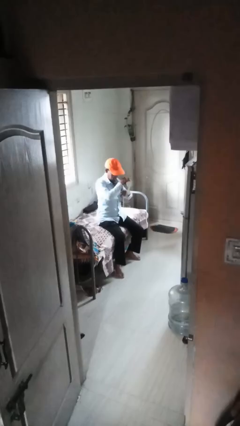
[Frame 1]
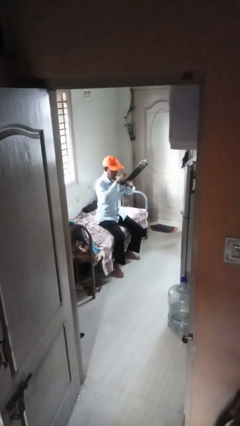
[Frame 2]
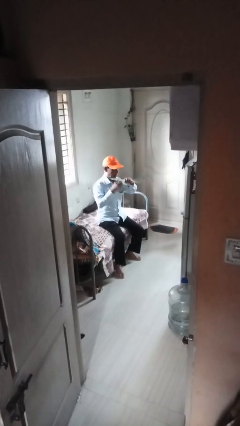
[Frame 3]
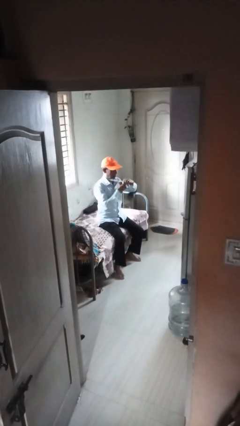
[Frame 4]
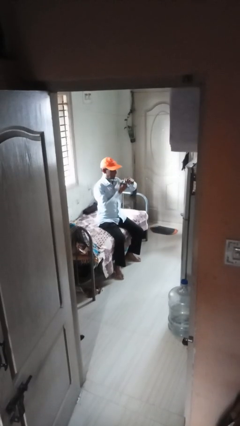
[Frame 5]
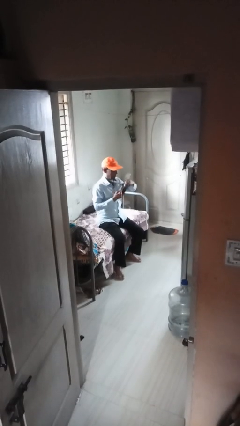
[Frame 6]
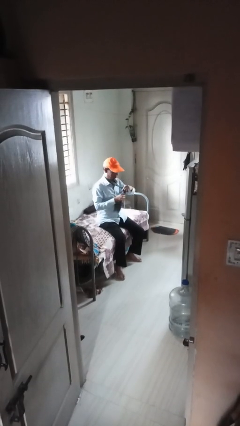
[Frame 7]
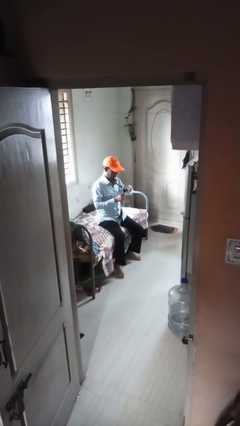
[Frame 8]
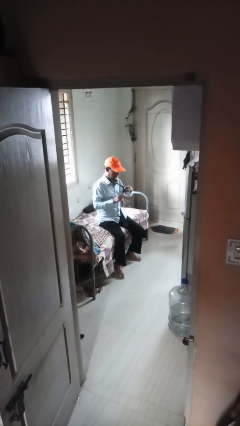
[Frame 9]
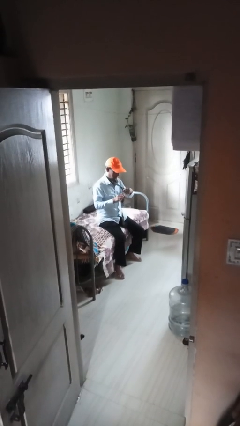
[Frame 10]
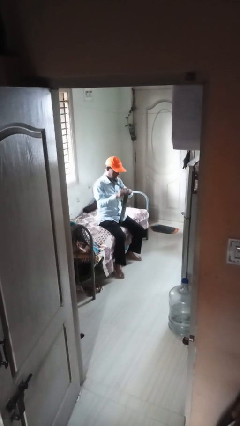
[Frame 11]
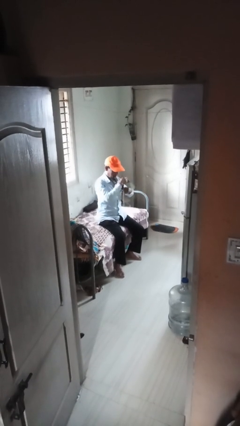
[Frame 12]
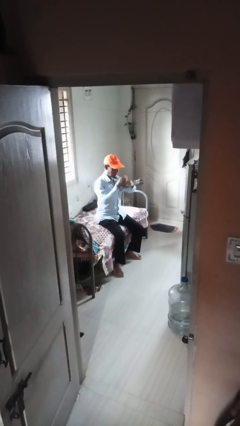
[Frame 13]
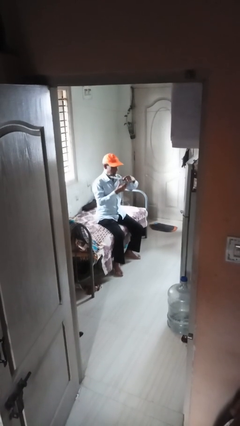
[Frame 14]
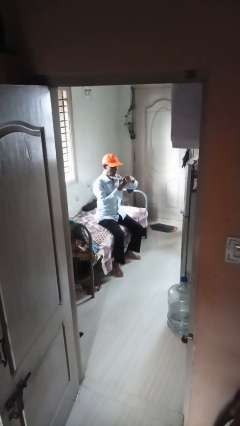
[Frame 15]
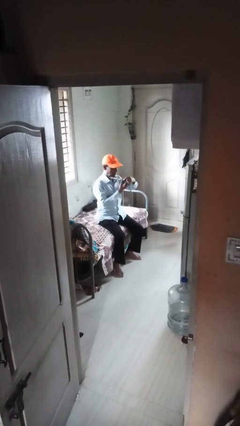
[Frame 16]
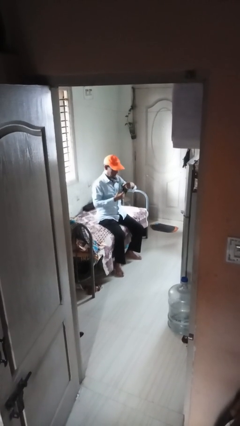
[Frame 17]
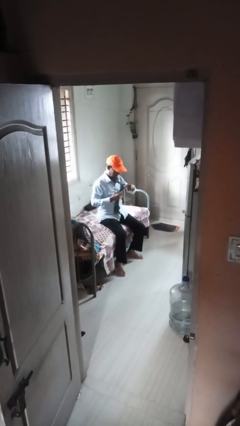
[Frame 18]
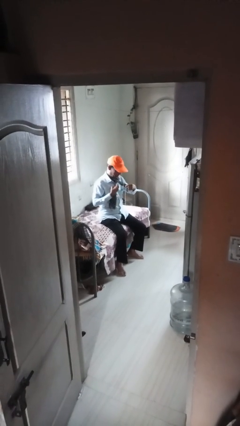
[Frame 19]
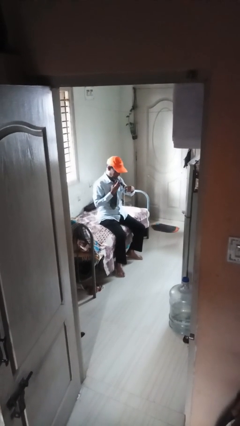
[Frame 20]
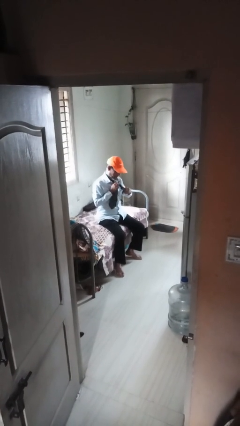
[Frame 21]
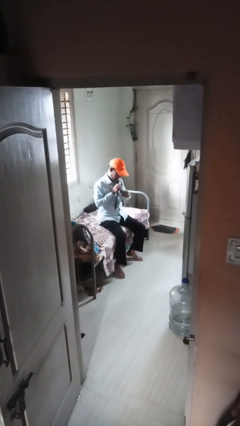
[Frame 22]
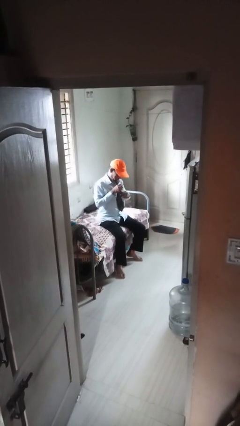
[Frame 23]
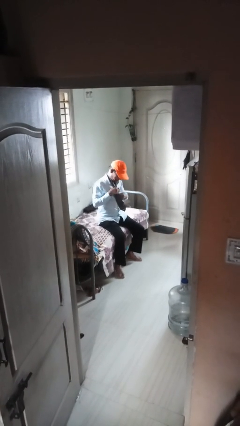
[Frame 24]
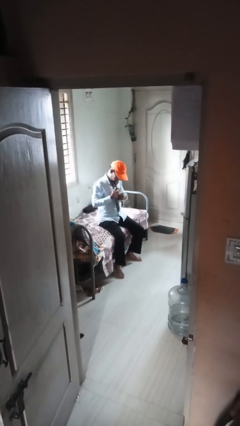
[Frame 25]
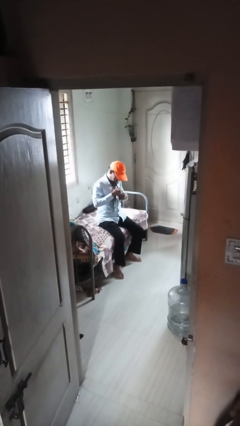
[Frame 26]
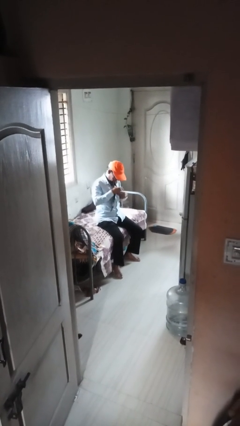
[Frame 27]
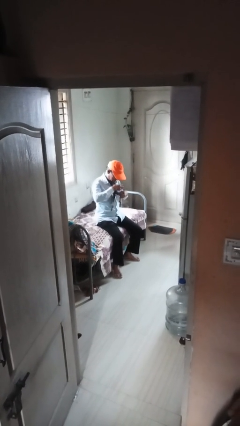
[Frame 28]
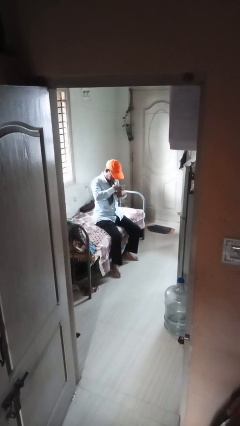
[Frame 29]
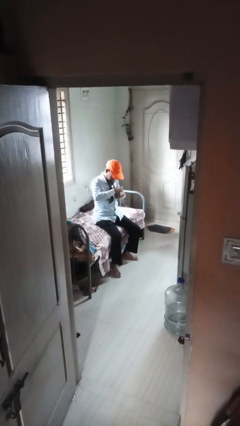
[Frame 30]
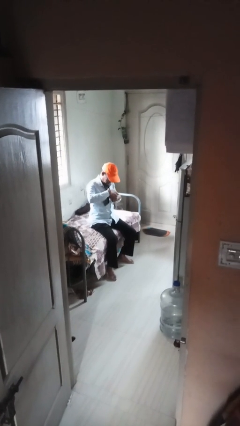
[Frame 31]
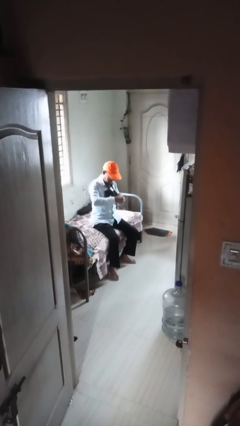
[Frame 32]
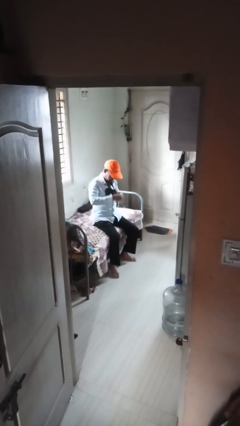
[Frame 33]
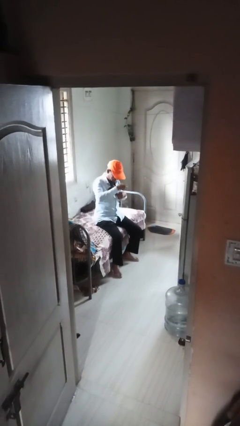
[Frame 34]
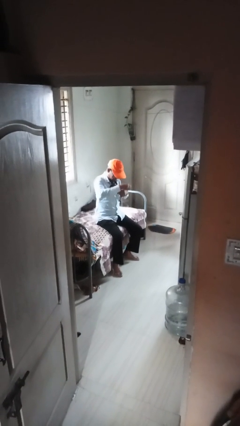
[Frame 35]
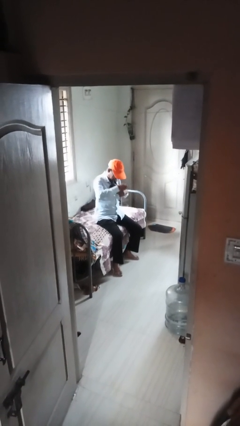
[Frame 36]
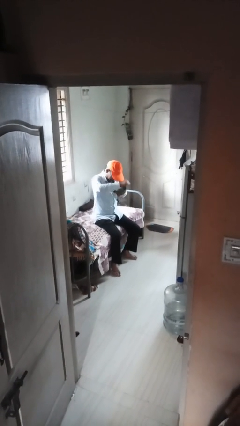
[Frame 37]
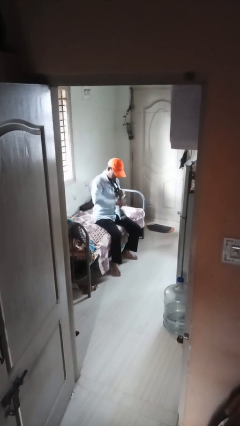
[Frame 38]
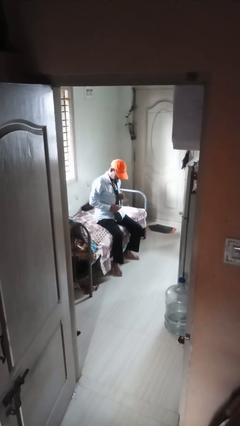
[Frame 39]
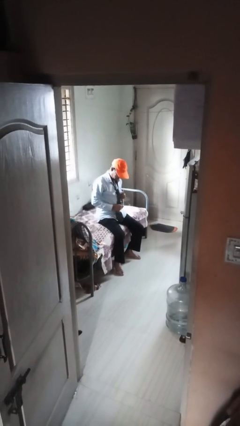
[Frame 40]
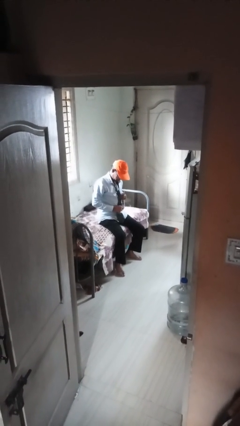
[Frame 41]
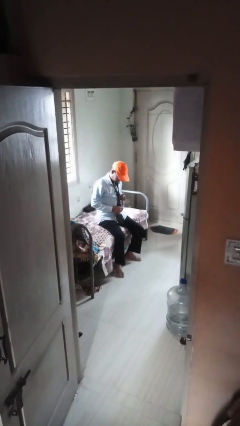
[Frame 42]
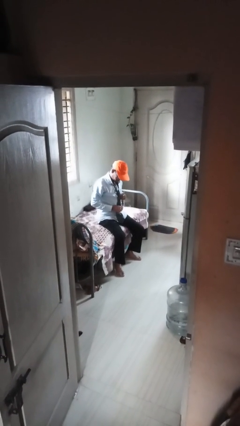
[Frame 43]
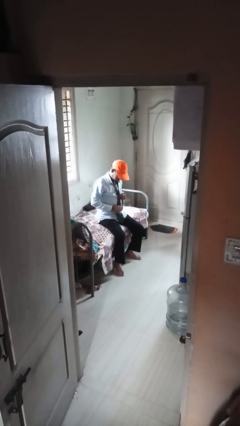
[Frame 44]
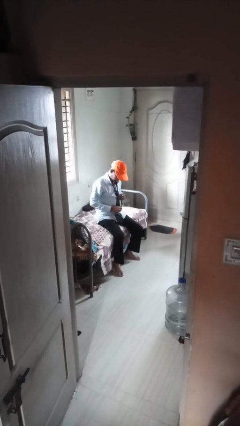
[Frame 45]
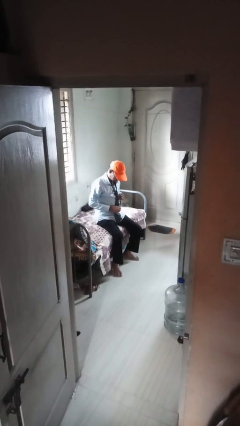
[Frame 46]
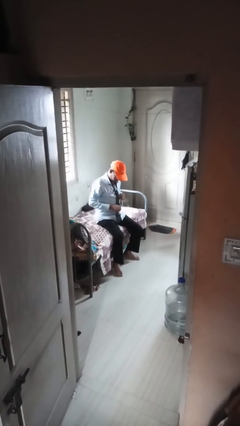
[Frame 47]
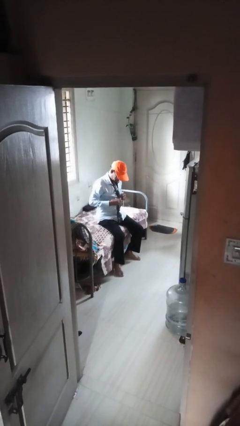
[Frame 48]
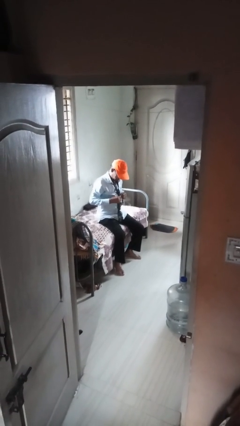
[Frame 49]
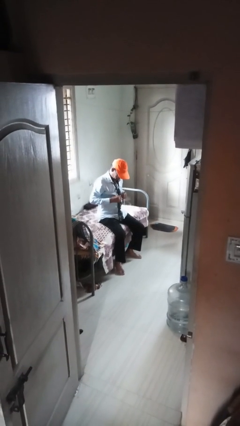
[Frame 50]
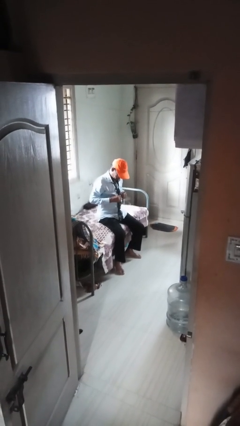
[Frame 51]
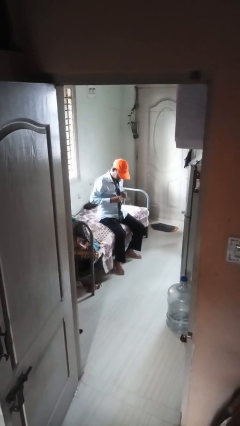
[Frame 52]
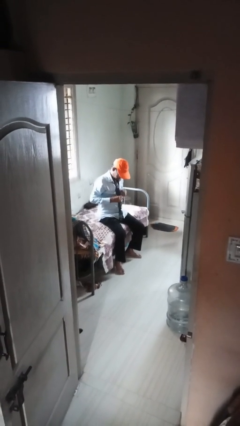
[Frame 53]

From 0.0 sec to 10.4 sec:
person puts on necktie

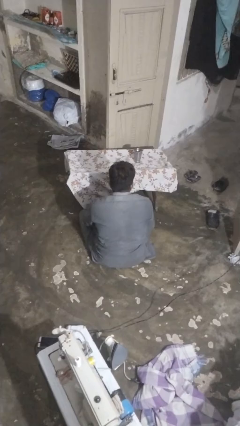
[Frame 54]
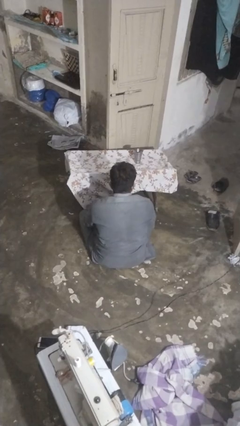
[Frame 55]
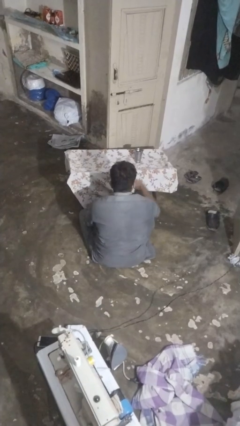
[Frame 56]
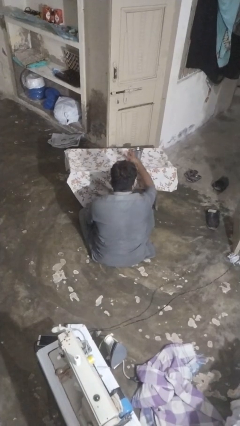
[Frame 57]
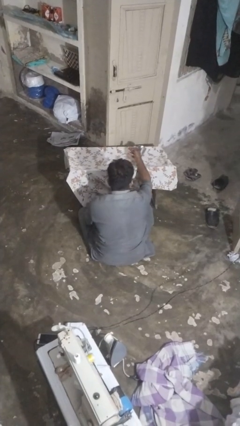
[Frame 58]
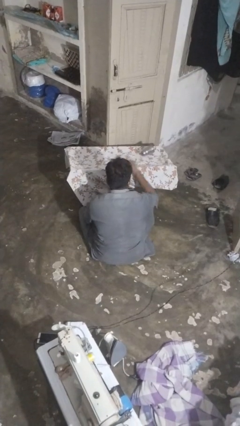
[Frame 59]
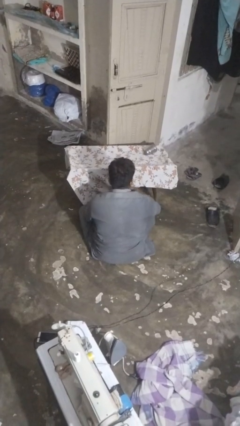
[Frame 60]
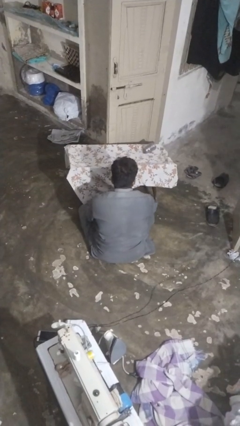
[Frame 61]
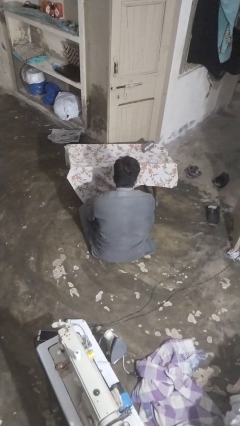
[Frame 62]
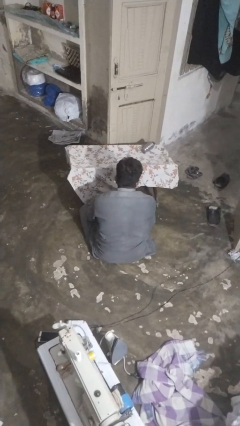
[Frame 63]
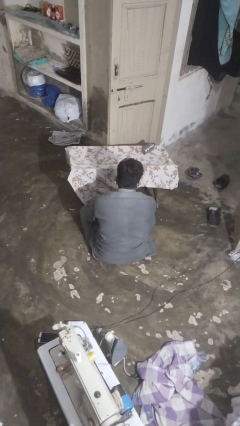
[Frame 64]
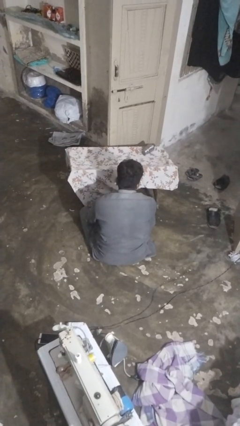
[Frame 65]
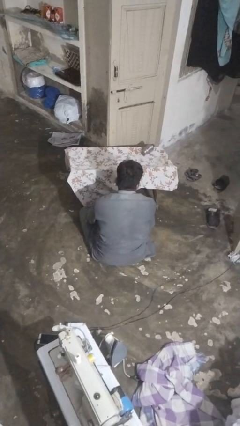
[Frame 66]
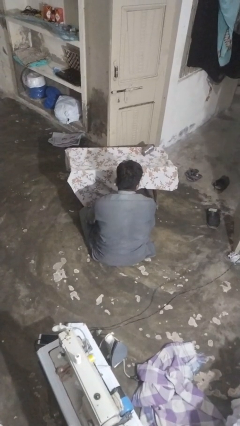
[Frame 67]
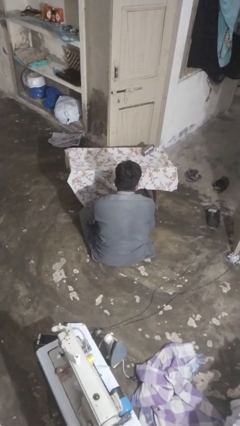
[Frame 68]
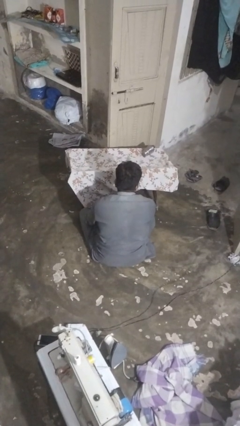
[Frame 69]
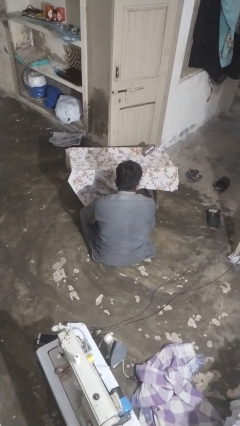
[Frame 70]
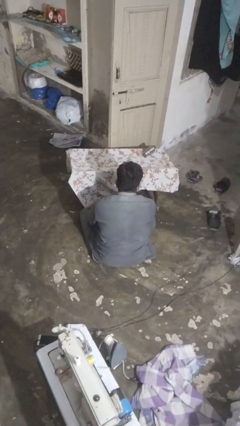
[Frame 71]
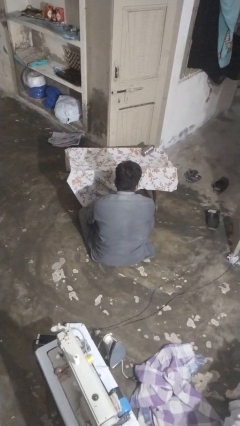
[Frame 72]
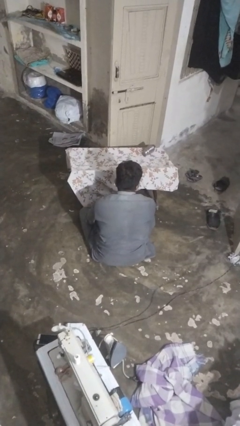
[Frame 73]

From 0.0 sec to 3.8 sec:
person knocks over glass

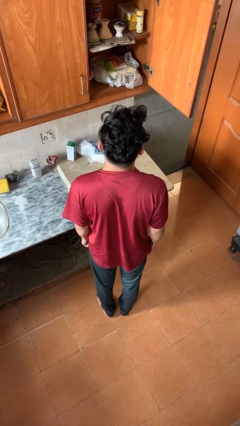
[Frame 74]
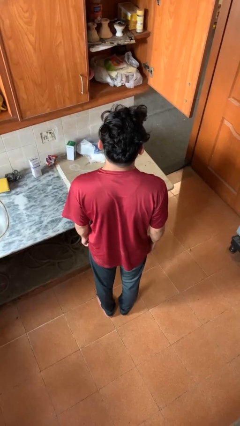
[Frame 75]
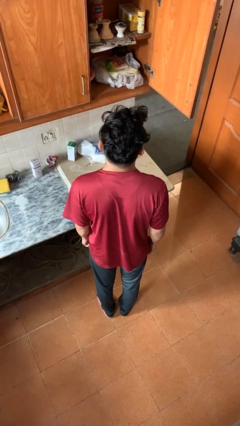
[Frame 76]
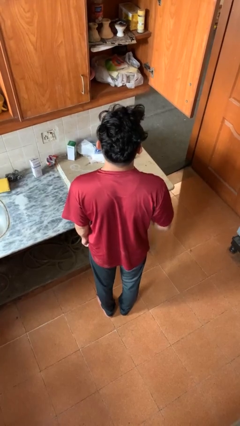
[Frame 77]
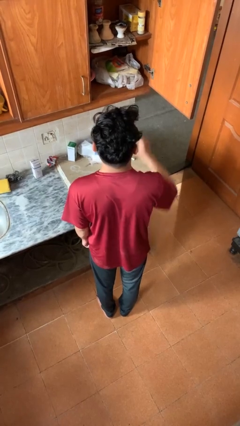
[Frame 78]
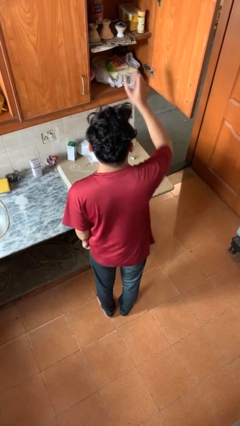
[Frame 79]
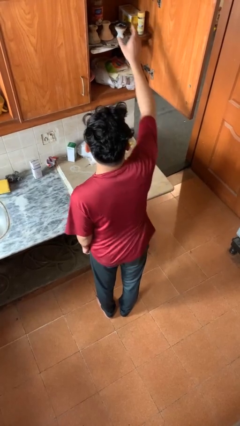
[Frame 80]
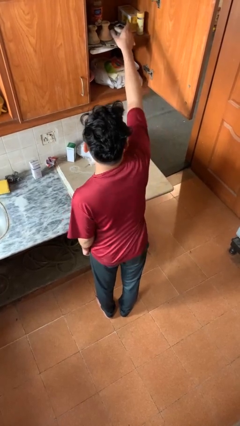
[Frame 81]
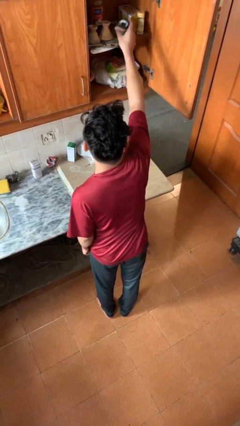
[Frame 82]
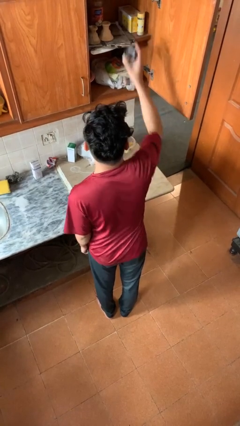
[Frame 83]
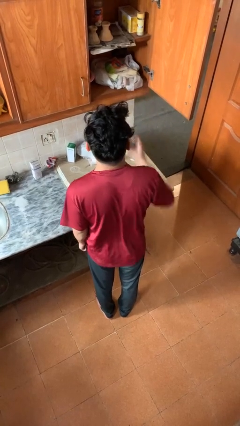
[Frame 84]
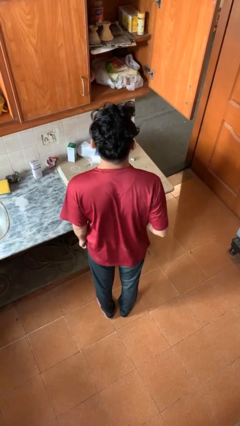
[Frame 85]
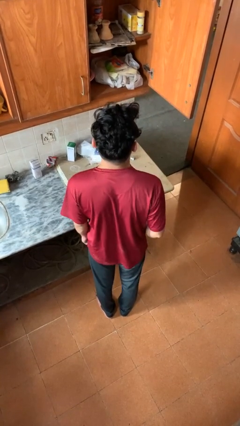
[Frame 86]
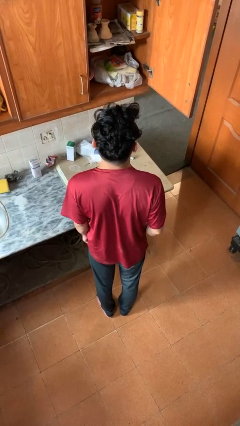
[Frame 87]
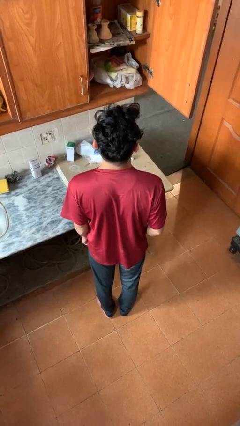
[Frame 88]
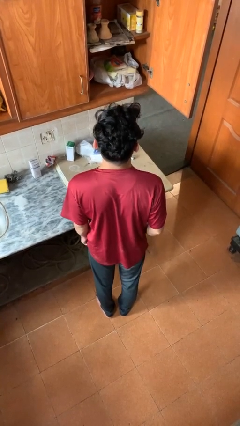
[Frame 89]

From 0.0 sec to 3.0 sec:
person takes object from cabinet

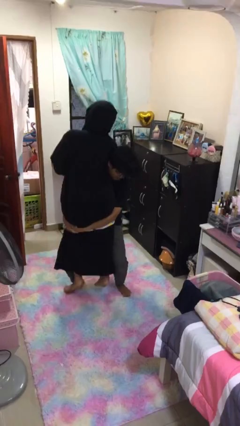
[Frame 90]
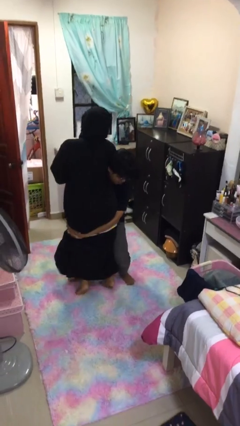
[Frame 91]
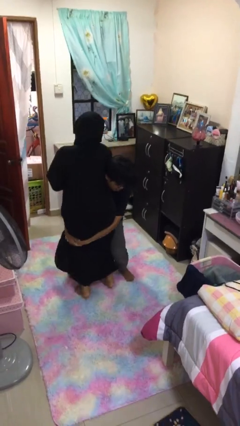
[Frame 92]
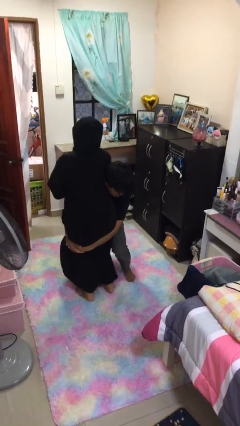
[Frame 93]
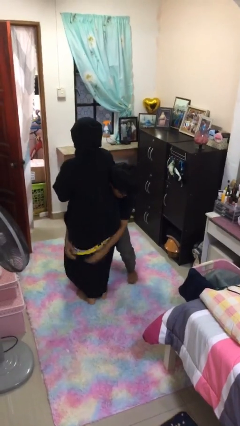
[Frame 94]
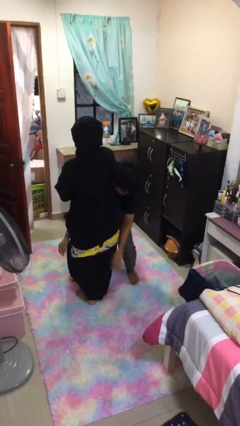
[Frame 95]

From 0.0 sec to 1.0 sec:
person puts down person
